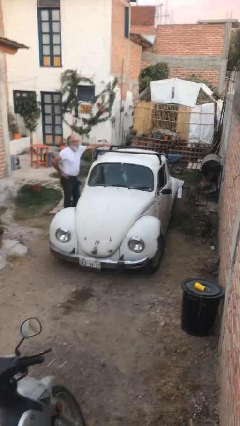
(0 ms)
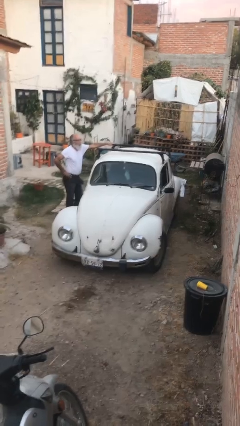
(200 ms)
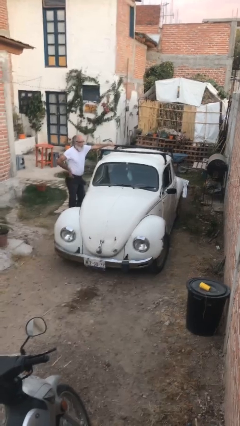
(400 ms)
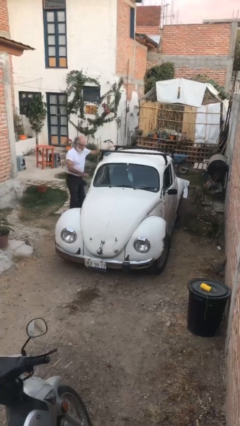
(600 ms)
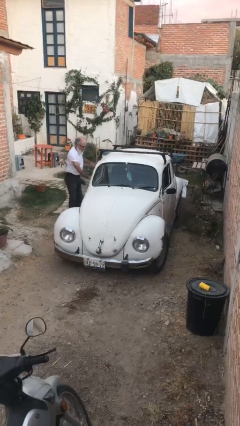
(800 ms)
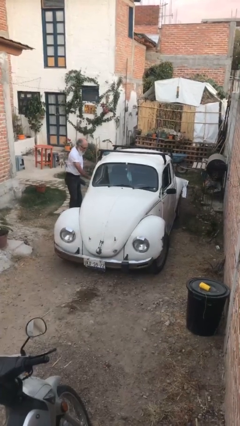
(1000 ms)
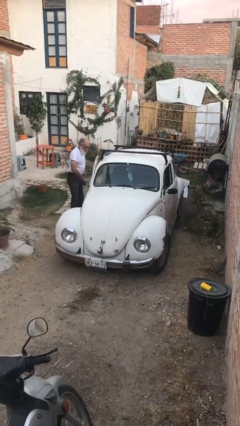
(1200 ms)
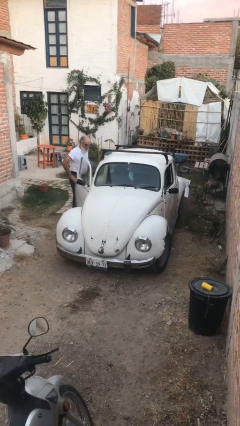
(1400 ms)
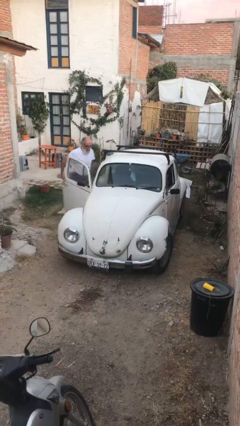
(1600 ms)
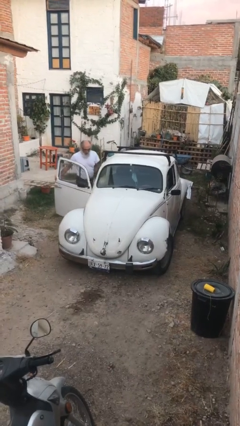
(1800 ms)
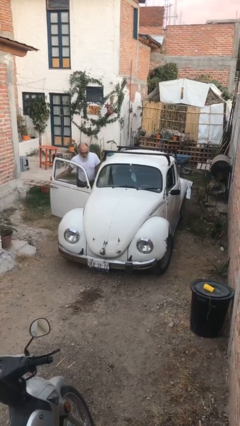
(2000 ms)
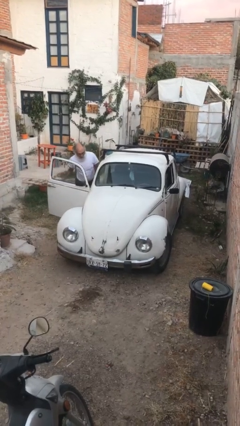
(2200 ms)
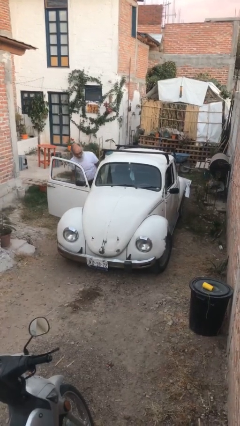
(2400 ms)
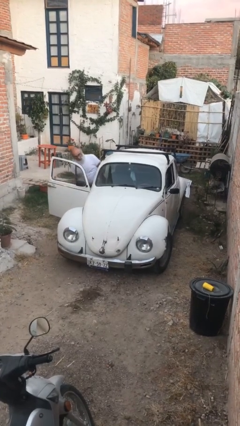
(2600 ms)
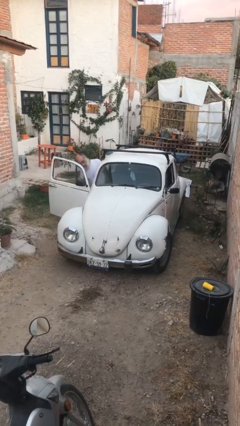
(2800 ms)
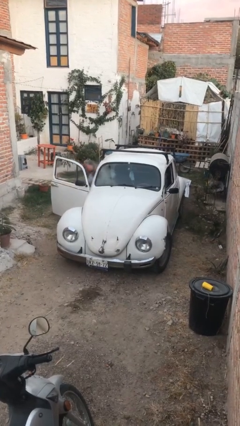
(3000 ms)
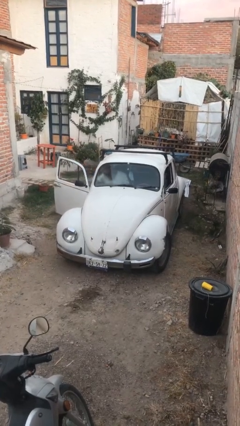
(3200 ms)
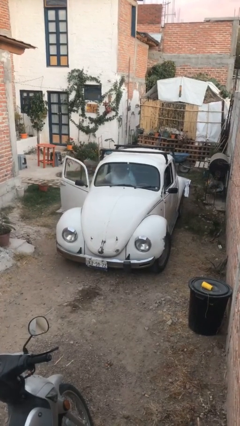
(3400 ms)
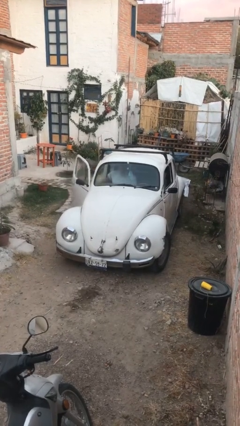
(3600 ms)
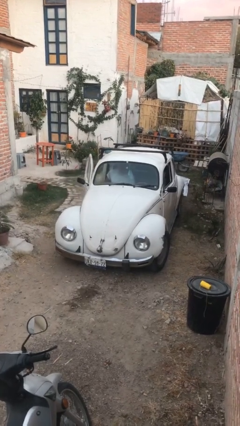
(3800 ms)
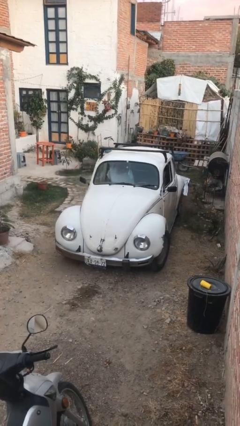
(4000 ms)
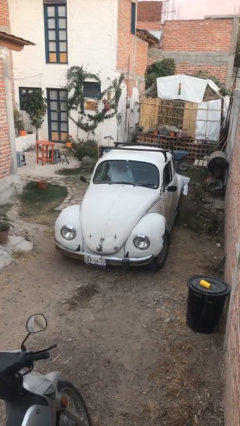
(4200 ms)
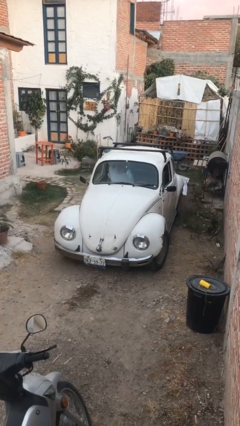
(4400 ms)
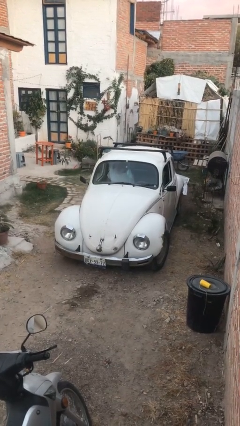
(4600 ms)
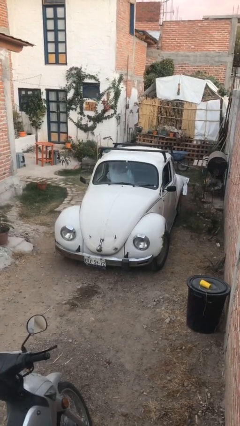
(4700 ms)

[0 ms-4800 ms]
car picks up person

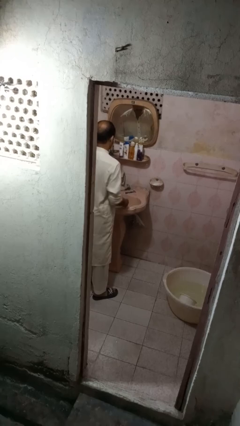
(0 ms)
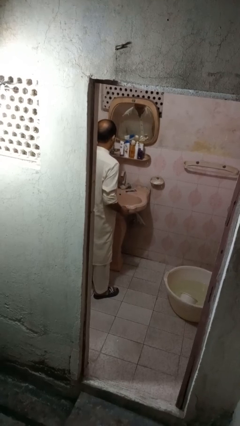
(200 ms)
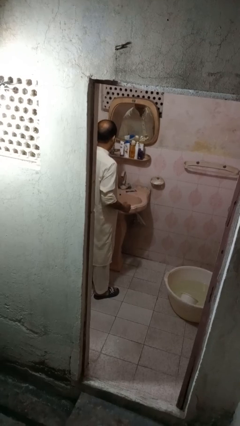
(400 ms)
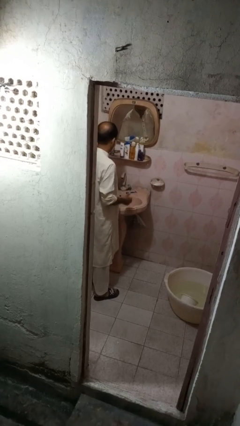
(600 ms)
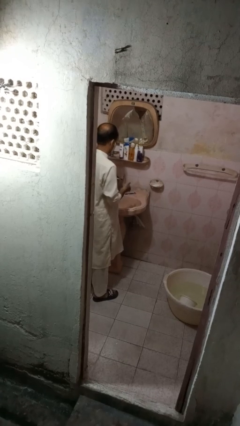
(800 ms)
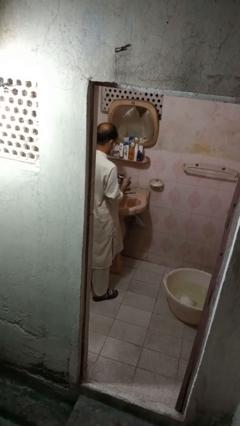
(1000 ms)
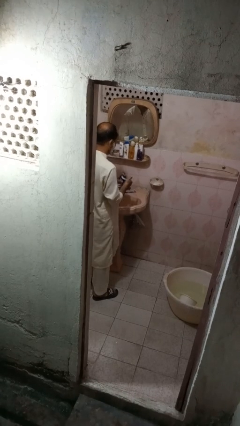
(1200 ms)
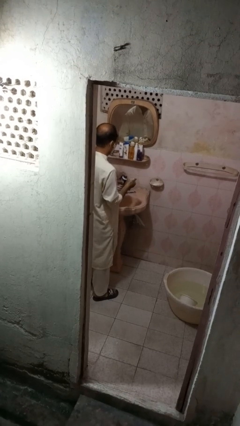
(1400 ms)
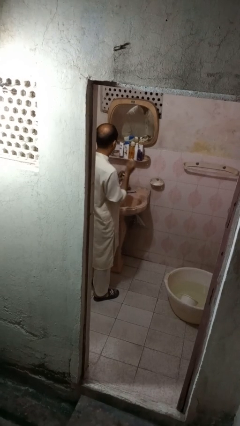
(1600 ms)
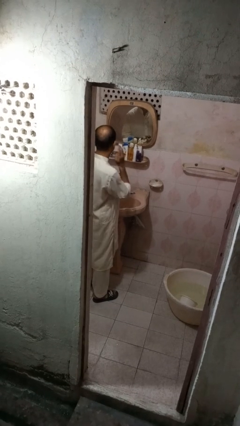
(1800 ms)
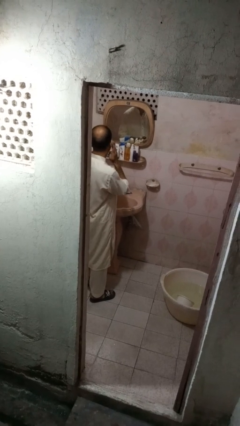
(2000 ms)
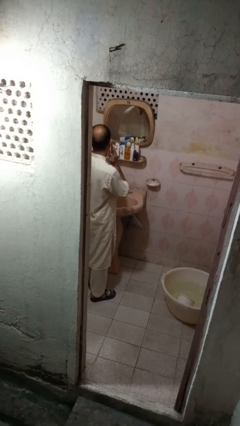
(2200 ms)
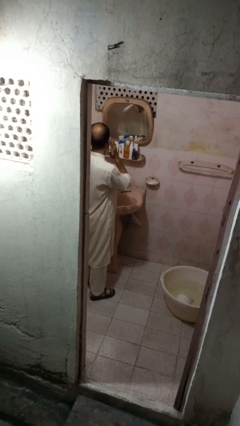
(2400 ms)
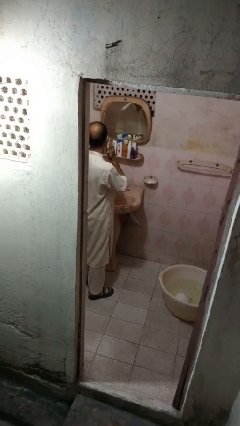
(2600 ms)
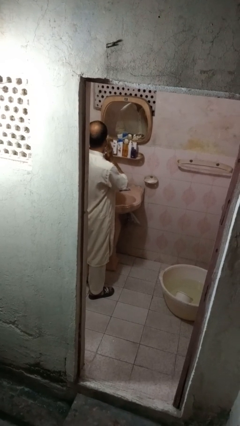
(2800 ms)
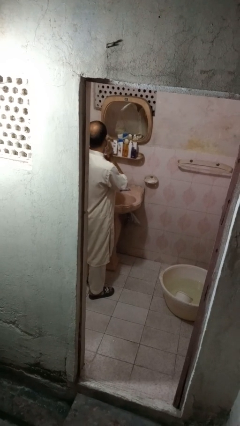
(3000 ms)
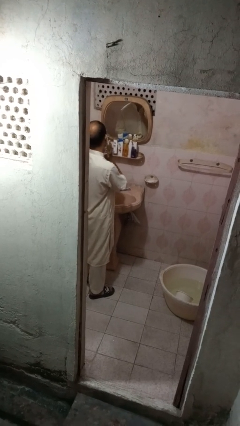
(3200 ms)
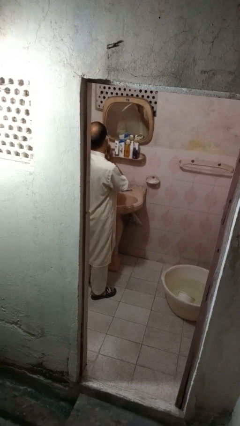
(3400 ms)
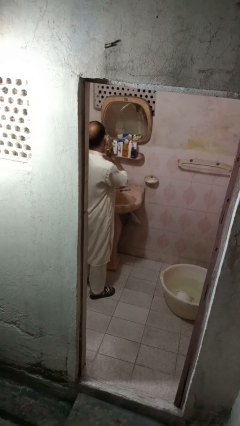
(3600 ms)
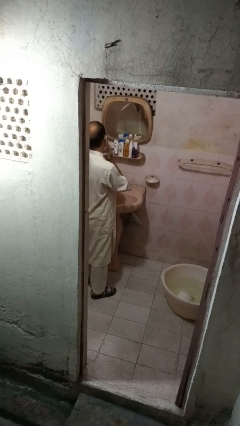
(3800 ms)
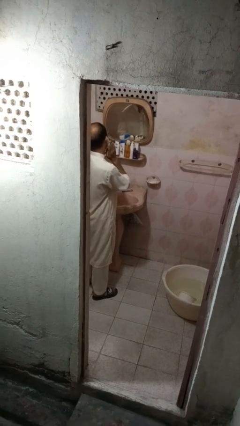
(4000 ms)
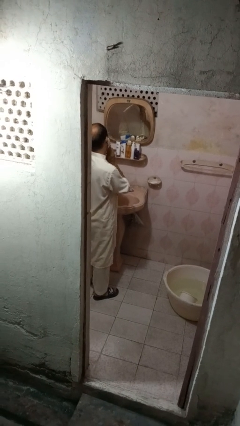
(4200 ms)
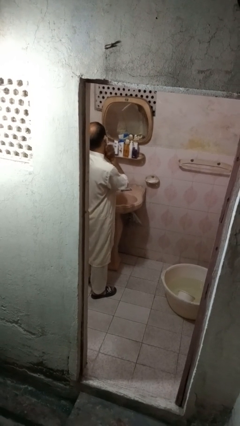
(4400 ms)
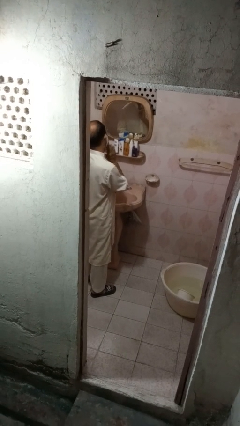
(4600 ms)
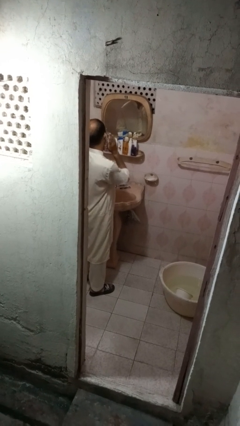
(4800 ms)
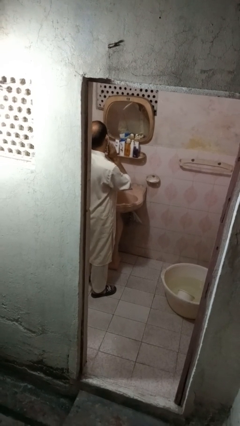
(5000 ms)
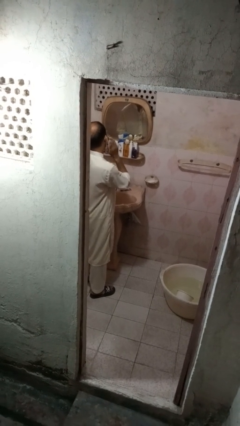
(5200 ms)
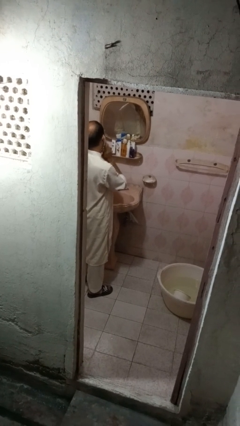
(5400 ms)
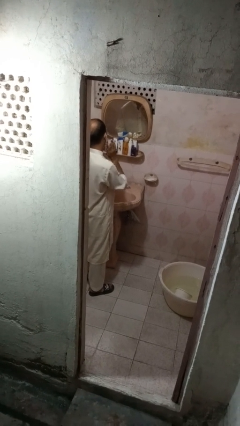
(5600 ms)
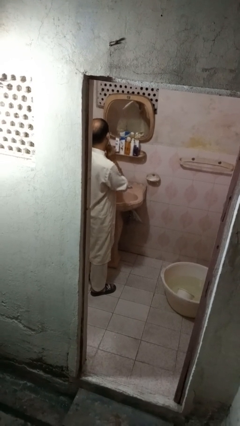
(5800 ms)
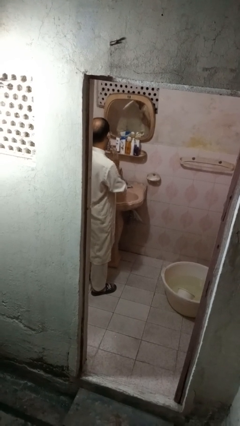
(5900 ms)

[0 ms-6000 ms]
person applies shaving cream

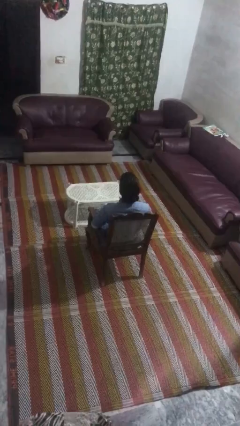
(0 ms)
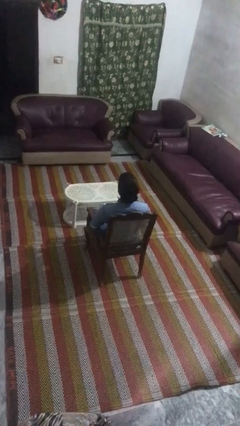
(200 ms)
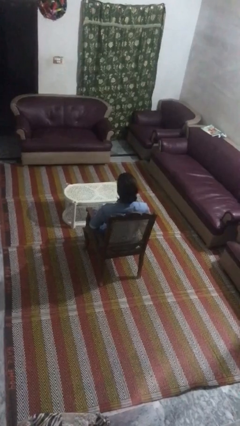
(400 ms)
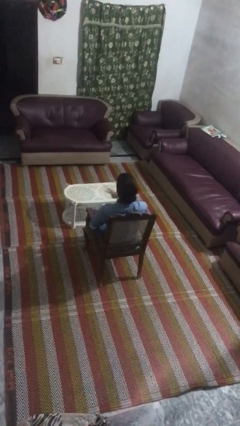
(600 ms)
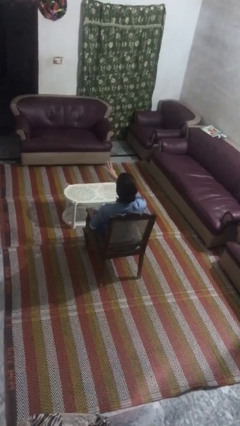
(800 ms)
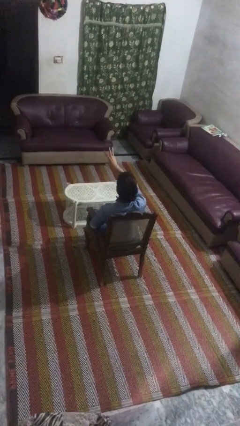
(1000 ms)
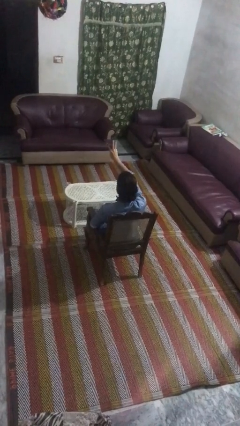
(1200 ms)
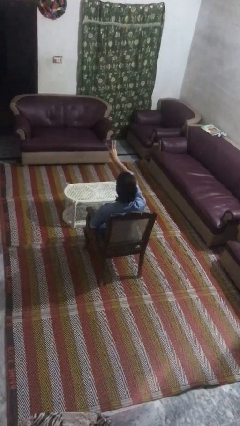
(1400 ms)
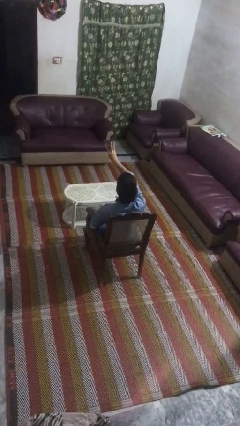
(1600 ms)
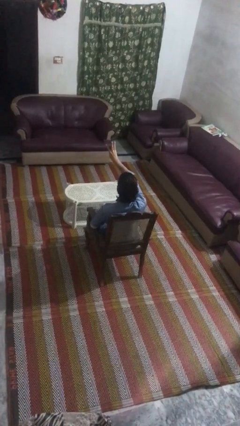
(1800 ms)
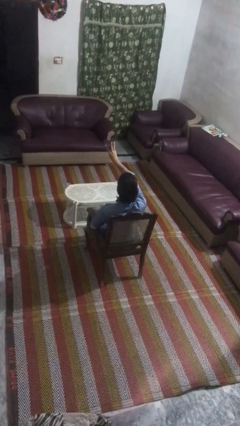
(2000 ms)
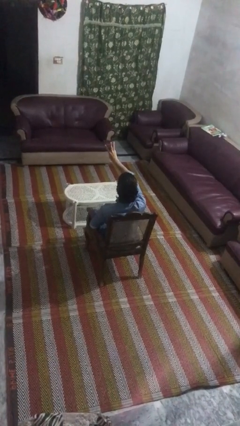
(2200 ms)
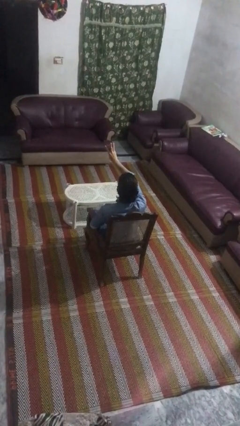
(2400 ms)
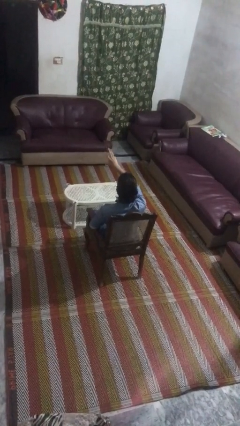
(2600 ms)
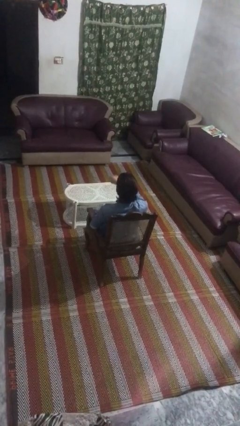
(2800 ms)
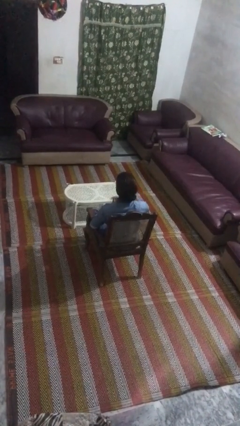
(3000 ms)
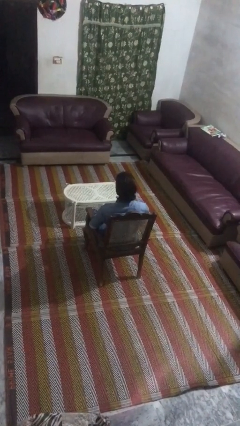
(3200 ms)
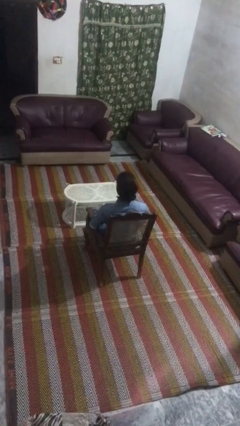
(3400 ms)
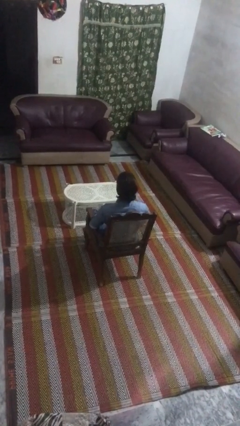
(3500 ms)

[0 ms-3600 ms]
person gestures number three

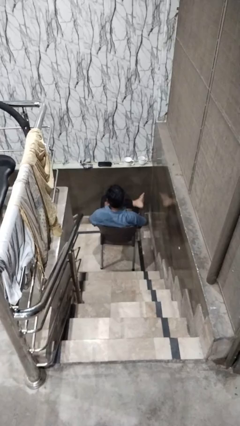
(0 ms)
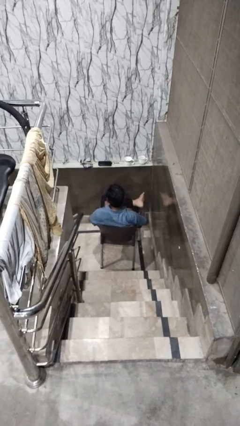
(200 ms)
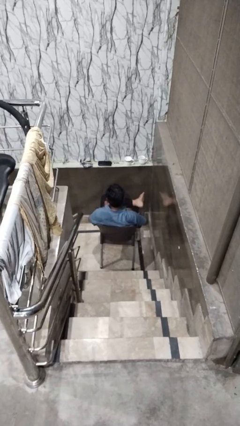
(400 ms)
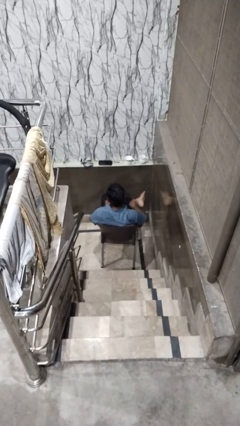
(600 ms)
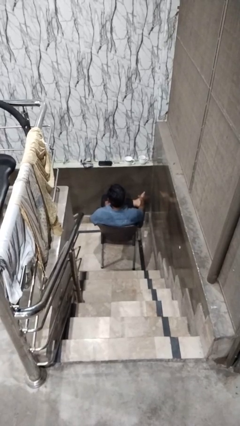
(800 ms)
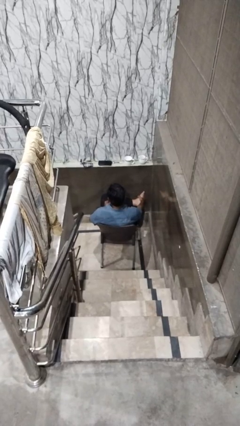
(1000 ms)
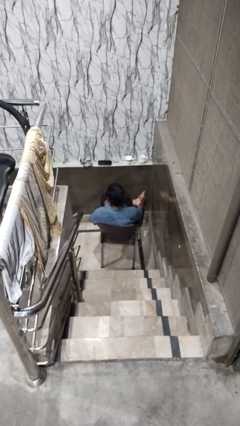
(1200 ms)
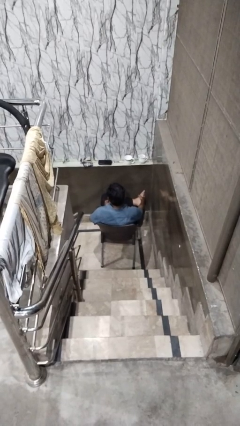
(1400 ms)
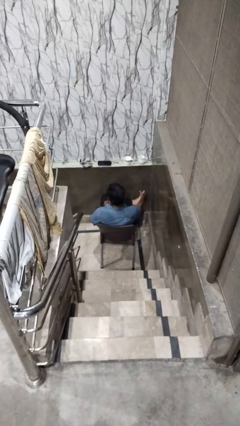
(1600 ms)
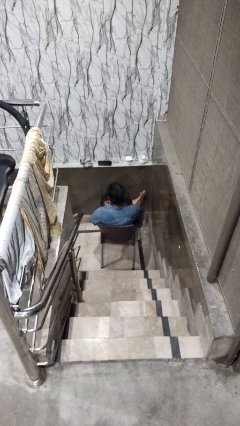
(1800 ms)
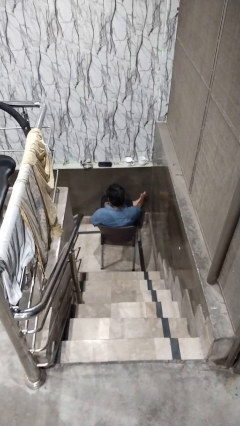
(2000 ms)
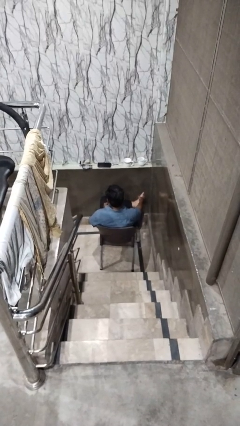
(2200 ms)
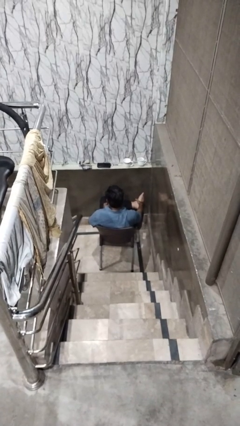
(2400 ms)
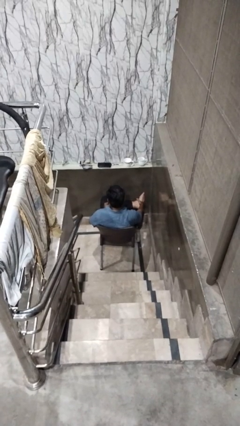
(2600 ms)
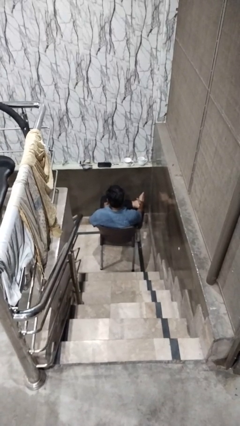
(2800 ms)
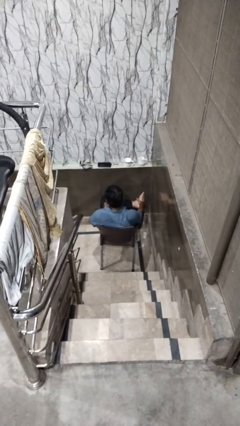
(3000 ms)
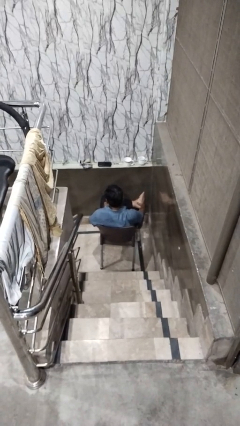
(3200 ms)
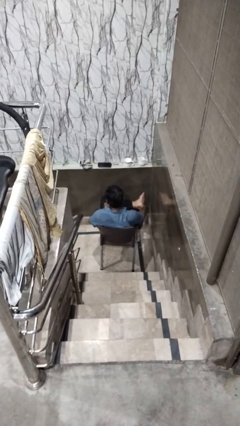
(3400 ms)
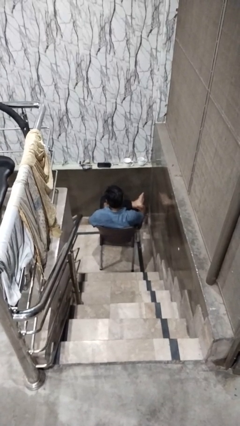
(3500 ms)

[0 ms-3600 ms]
person rubs foot
